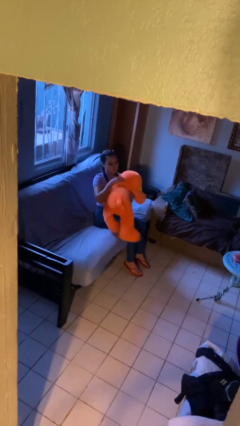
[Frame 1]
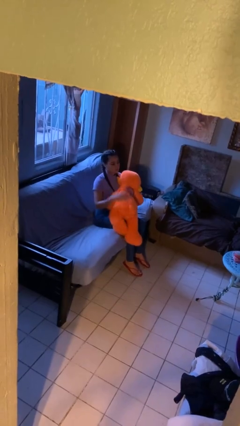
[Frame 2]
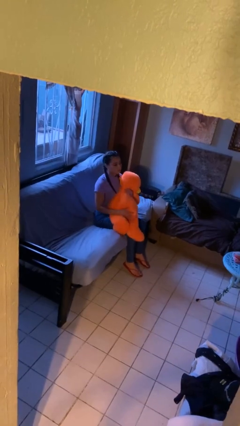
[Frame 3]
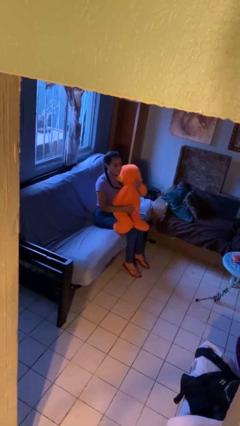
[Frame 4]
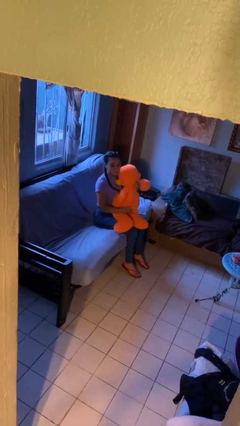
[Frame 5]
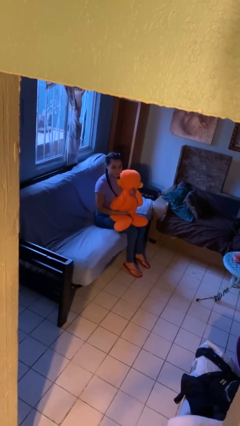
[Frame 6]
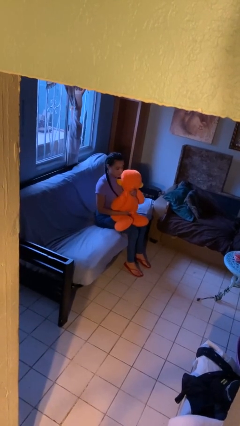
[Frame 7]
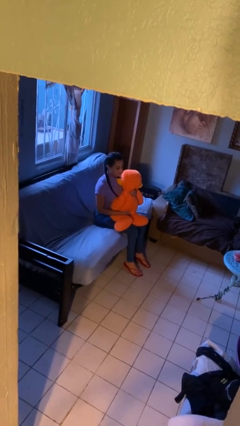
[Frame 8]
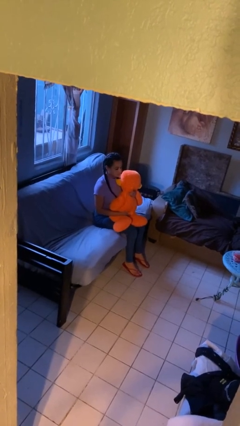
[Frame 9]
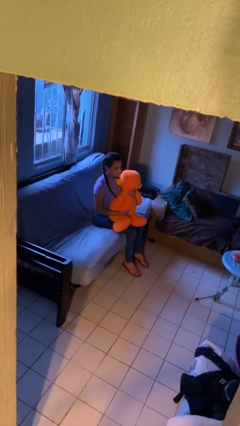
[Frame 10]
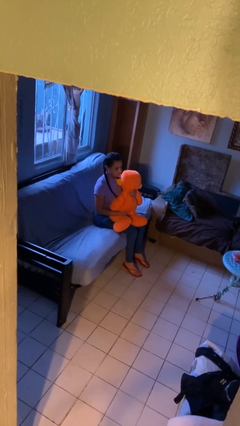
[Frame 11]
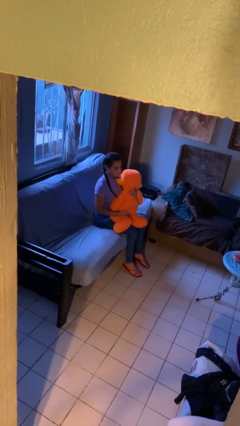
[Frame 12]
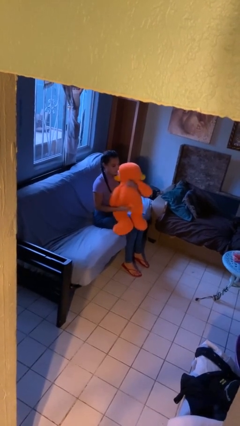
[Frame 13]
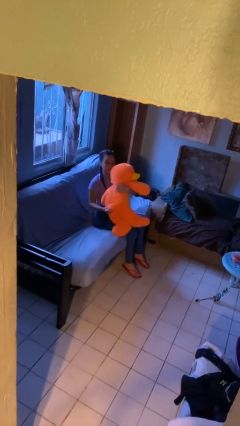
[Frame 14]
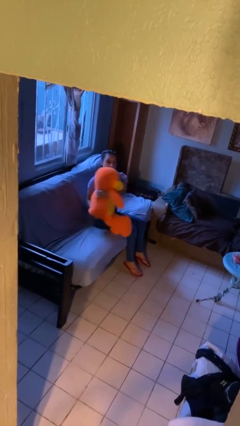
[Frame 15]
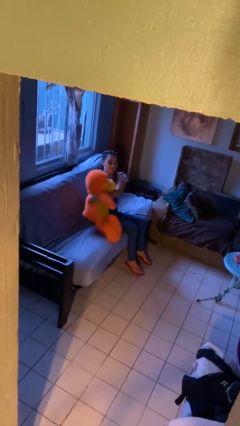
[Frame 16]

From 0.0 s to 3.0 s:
person hugs stuffed animal

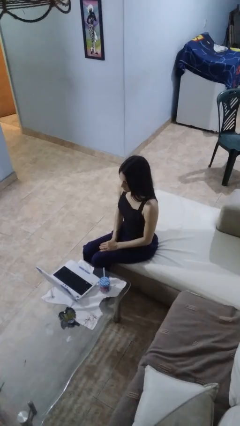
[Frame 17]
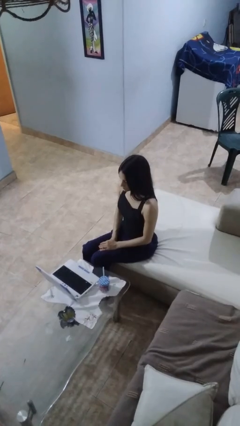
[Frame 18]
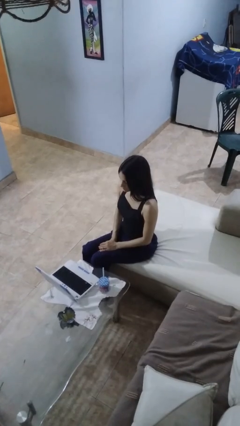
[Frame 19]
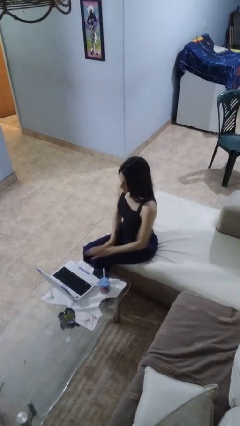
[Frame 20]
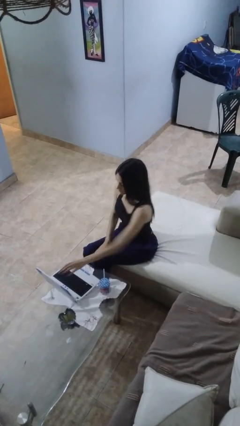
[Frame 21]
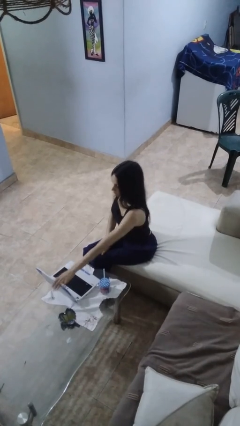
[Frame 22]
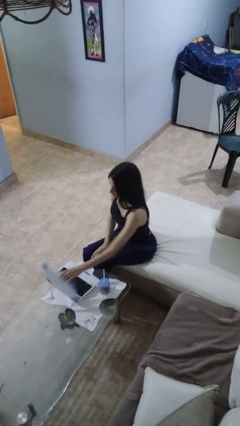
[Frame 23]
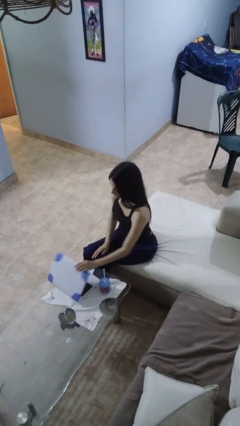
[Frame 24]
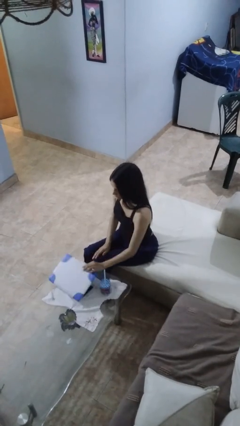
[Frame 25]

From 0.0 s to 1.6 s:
person closes laptop

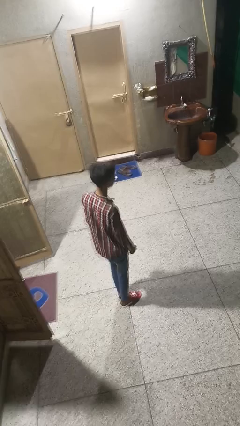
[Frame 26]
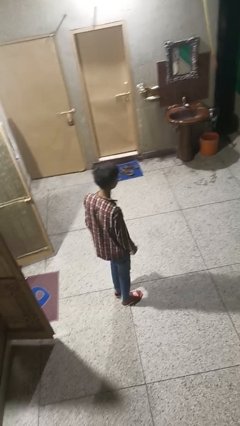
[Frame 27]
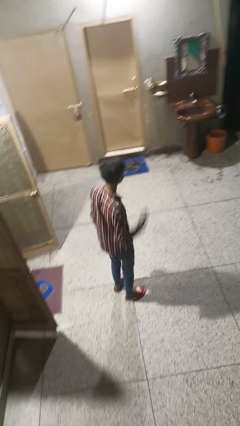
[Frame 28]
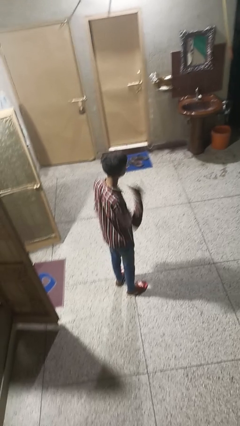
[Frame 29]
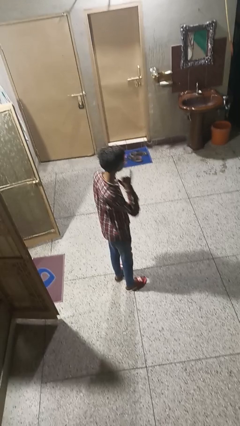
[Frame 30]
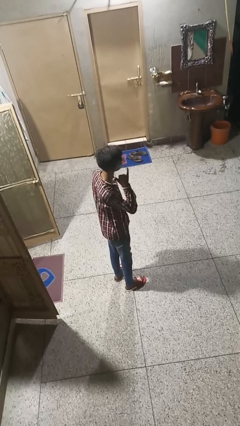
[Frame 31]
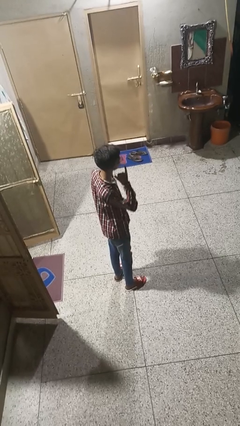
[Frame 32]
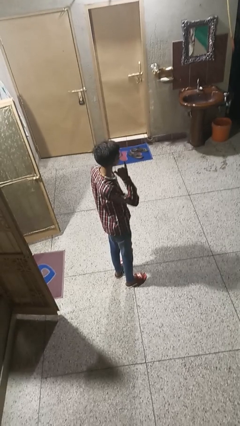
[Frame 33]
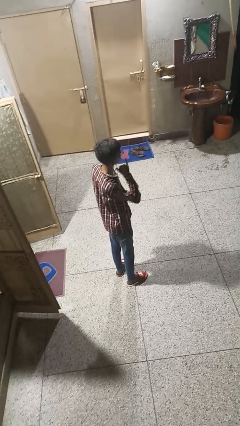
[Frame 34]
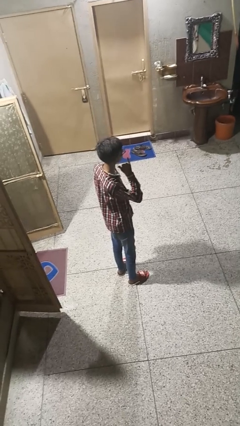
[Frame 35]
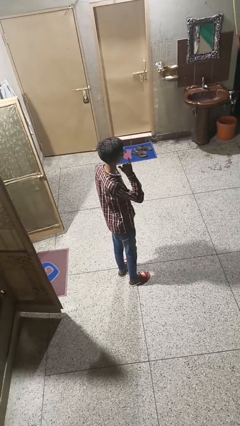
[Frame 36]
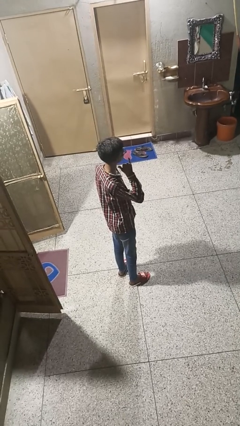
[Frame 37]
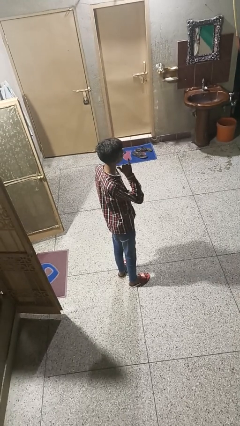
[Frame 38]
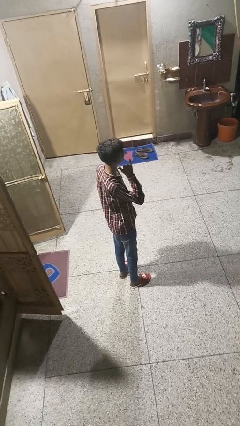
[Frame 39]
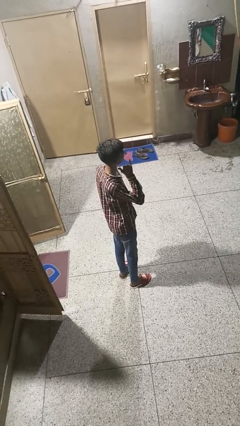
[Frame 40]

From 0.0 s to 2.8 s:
person gestures call me

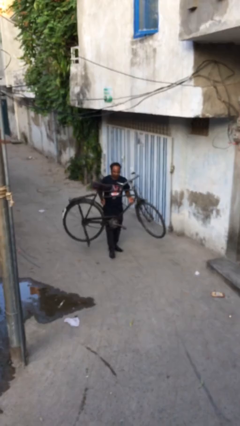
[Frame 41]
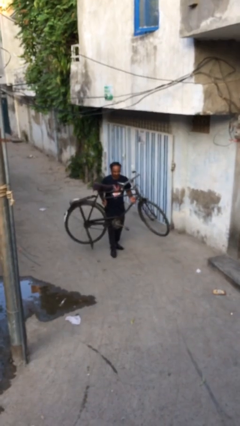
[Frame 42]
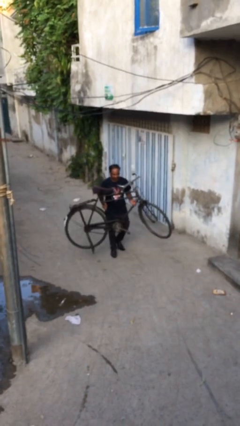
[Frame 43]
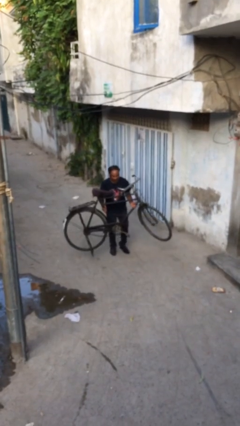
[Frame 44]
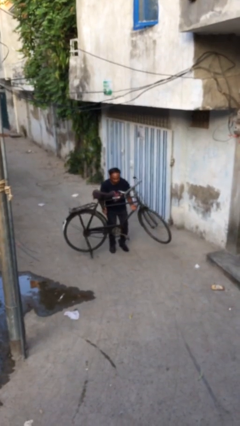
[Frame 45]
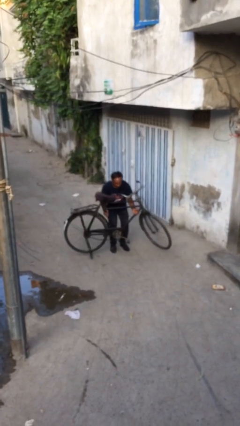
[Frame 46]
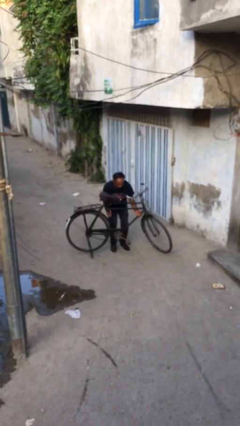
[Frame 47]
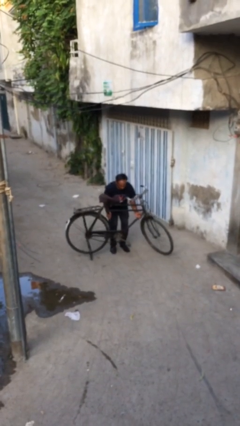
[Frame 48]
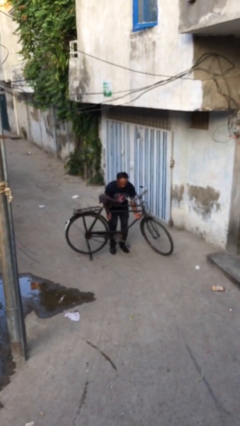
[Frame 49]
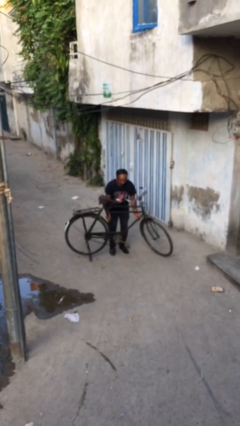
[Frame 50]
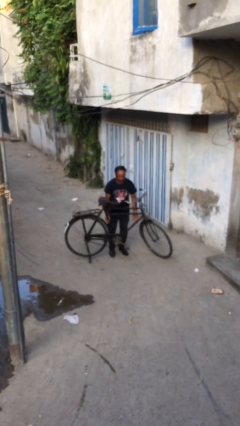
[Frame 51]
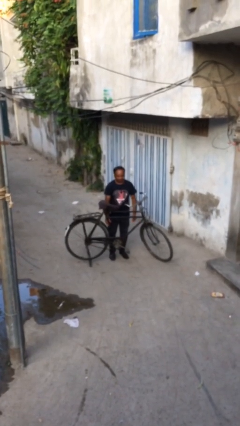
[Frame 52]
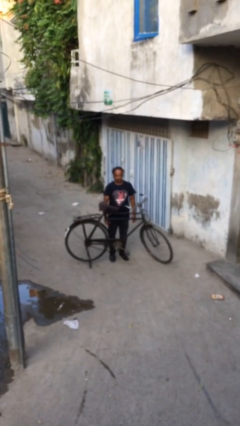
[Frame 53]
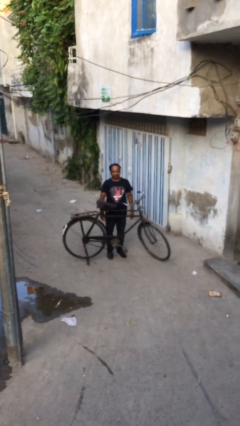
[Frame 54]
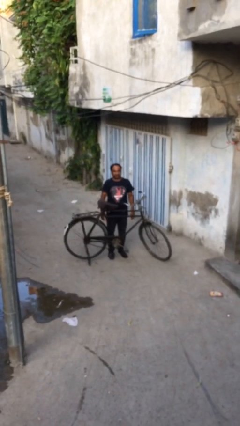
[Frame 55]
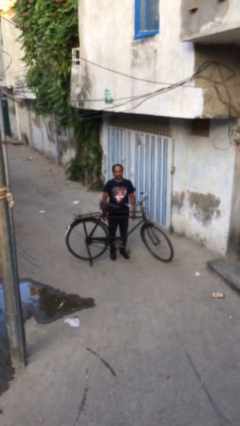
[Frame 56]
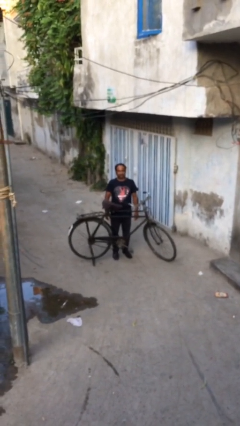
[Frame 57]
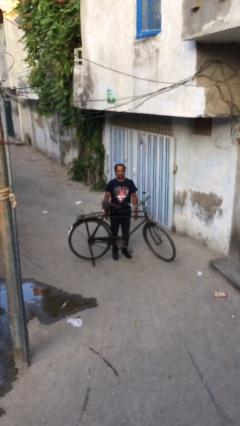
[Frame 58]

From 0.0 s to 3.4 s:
person puts down object on floor

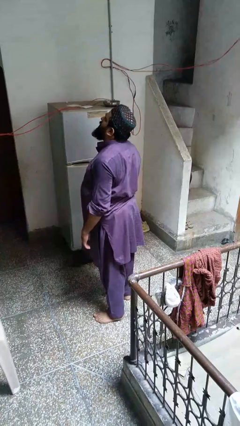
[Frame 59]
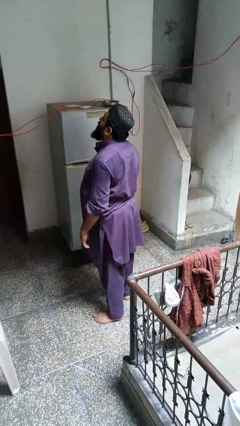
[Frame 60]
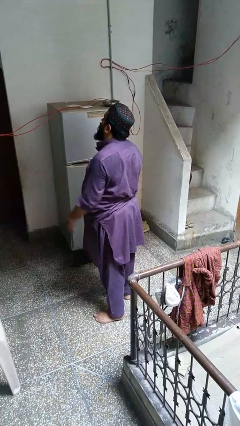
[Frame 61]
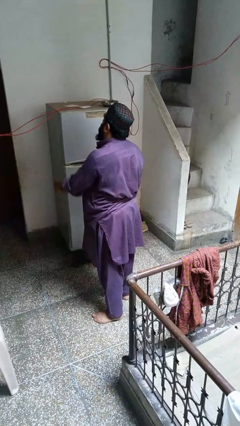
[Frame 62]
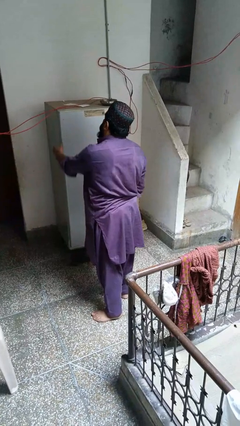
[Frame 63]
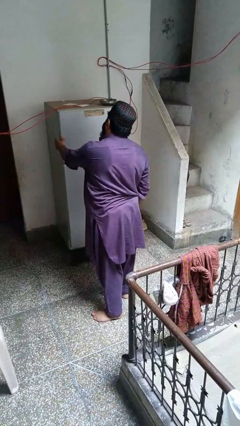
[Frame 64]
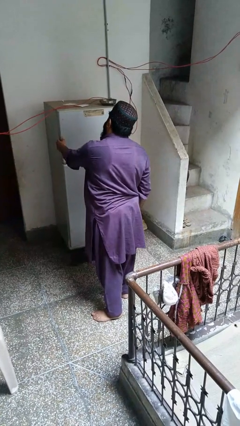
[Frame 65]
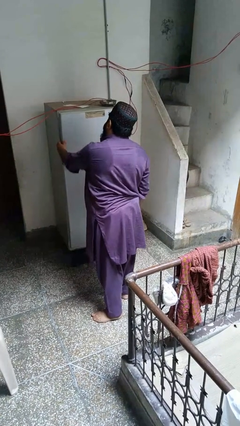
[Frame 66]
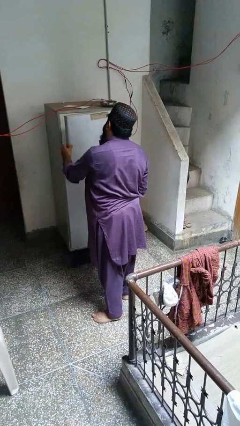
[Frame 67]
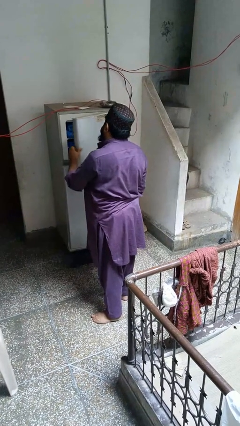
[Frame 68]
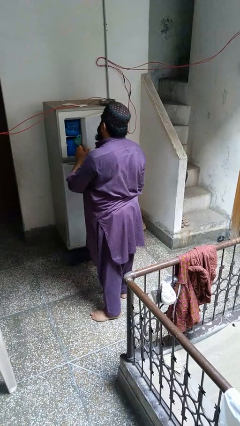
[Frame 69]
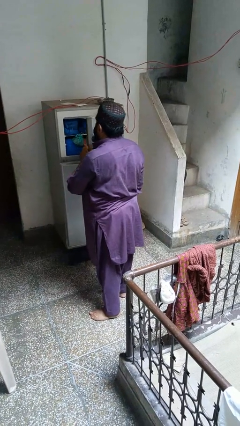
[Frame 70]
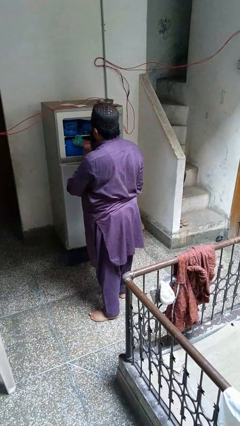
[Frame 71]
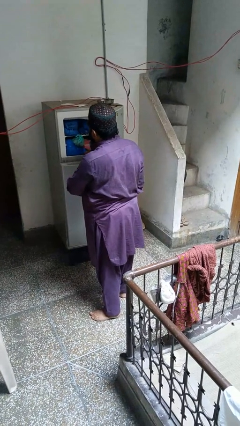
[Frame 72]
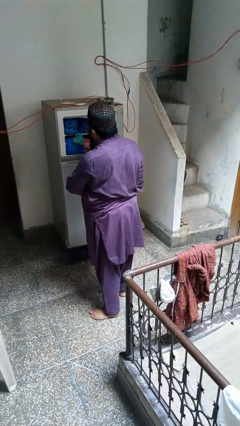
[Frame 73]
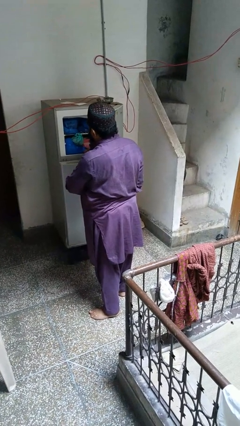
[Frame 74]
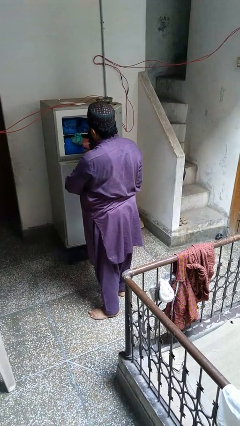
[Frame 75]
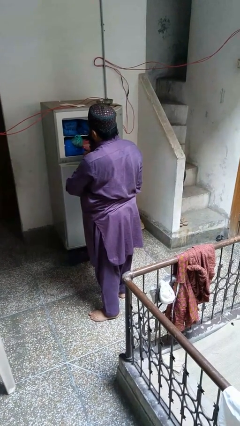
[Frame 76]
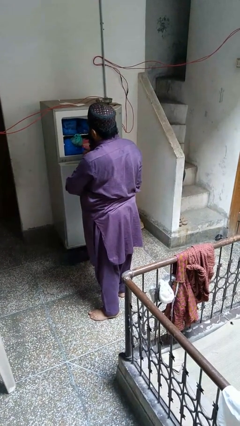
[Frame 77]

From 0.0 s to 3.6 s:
person opens refrigerator

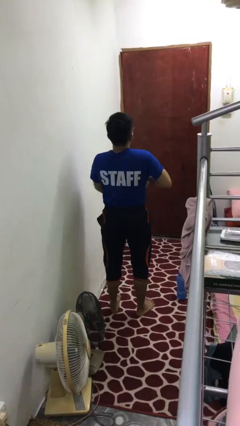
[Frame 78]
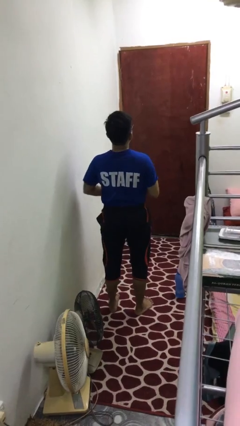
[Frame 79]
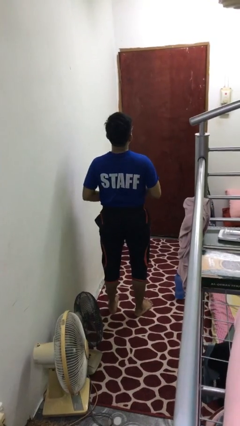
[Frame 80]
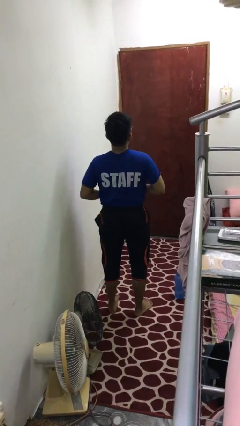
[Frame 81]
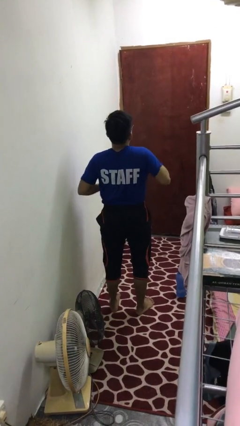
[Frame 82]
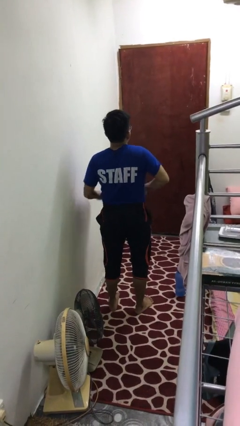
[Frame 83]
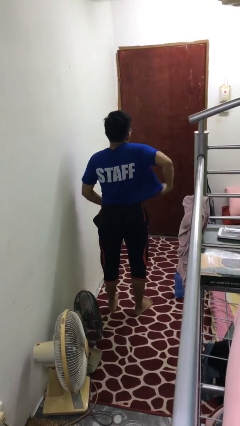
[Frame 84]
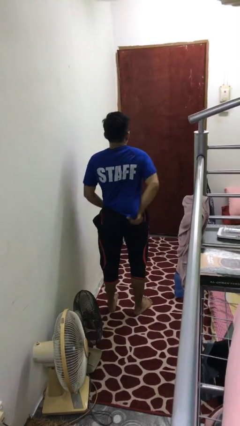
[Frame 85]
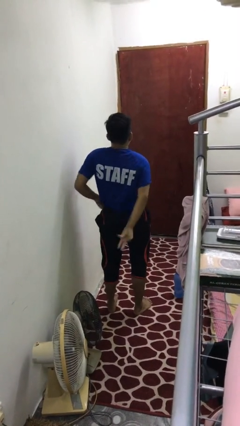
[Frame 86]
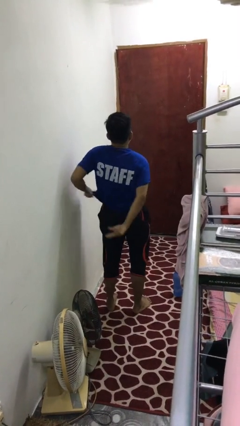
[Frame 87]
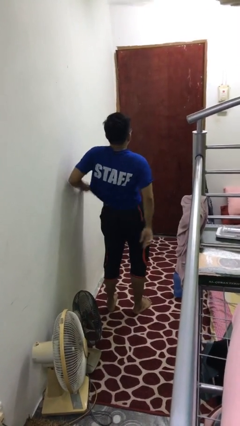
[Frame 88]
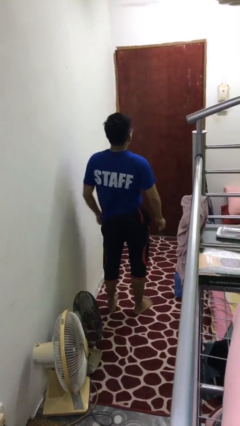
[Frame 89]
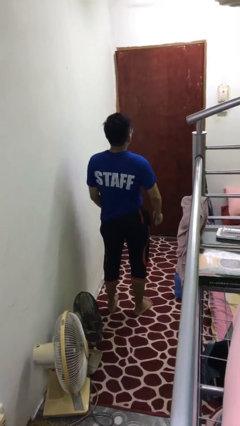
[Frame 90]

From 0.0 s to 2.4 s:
person untucks shirt
